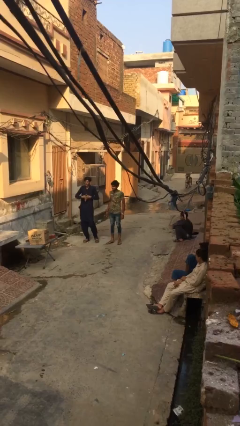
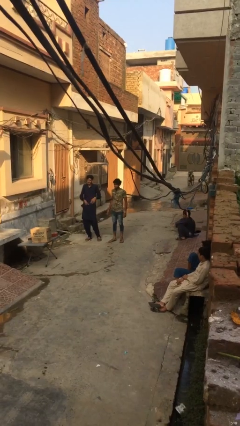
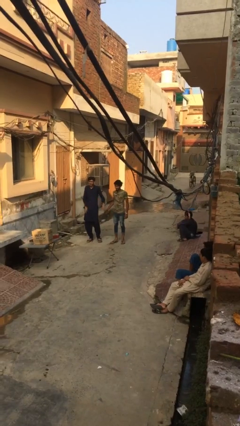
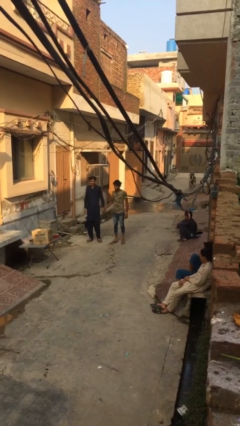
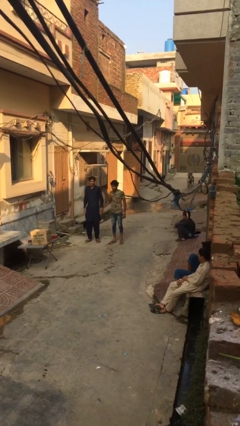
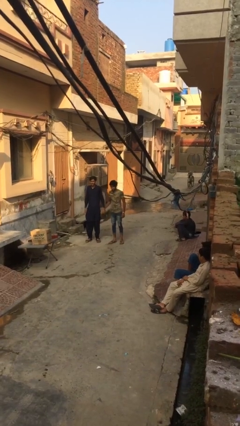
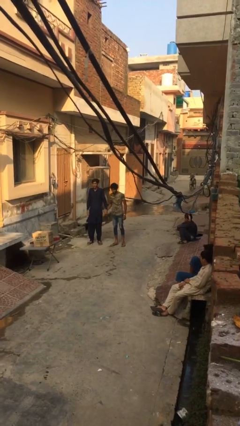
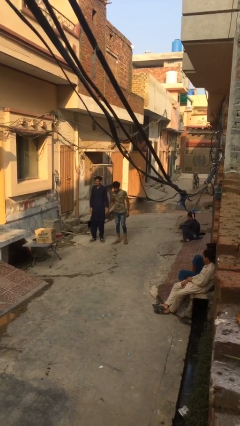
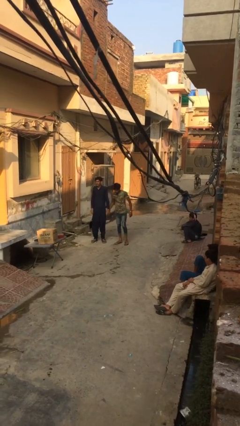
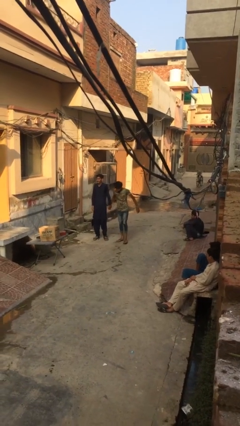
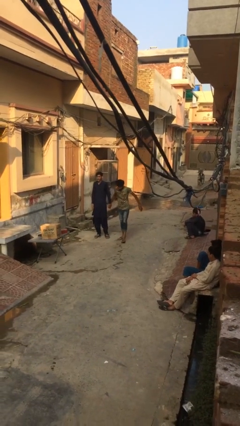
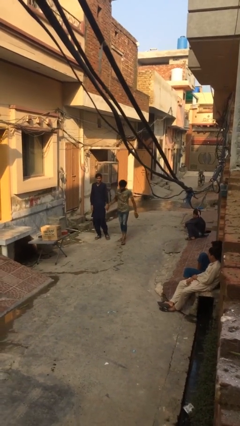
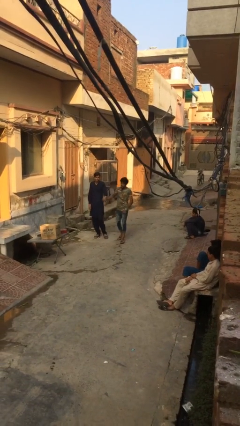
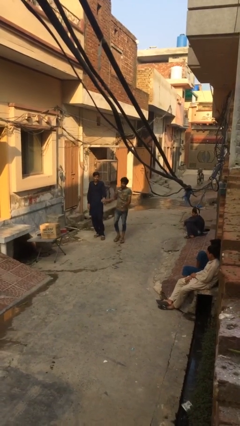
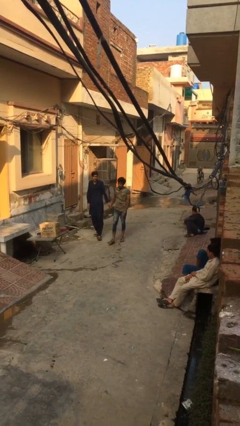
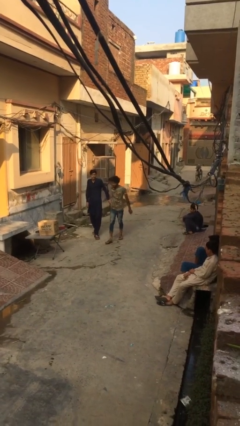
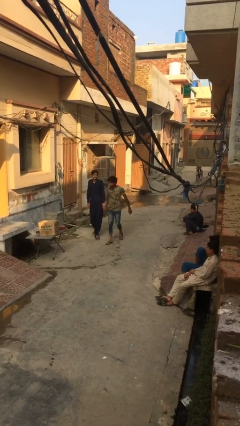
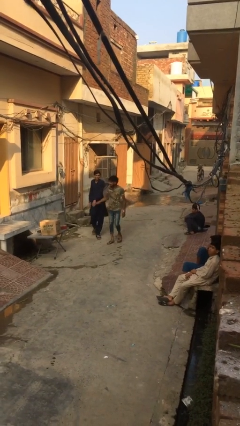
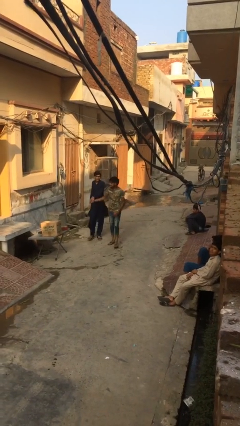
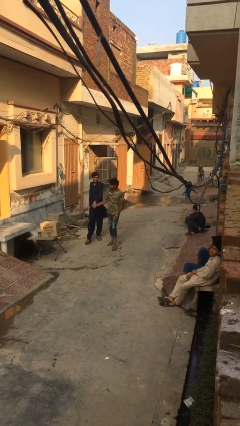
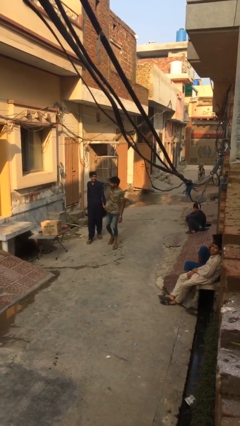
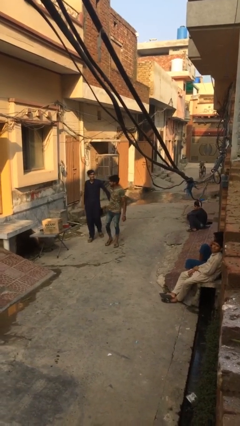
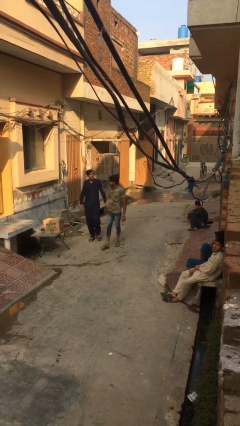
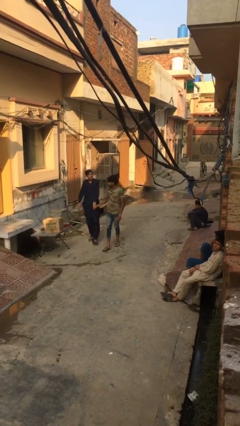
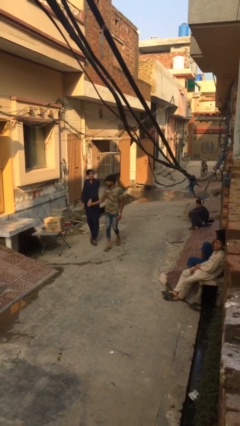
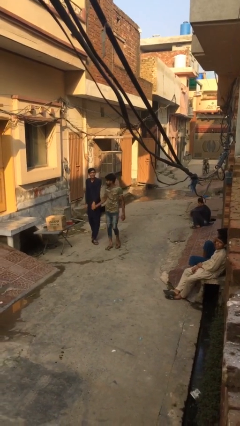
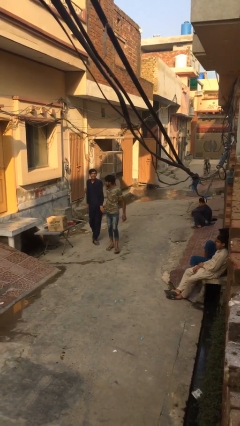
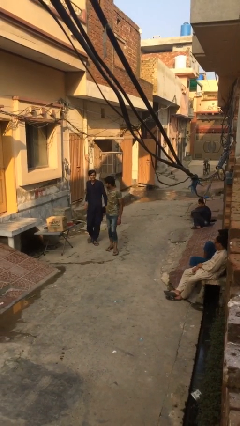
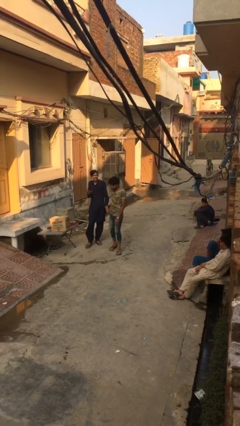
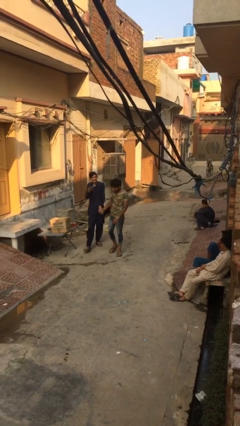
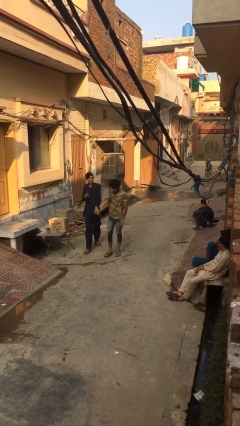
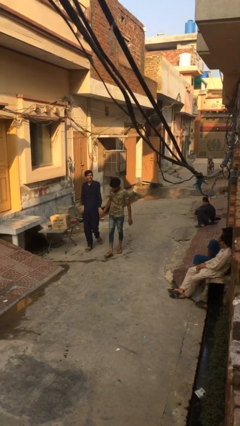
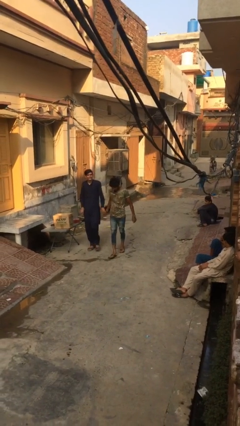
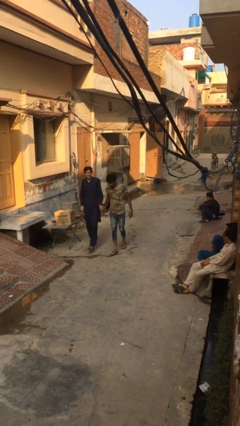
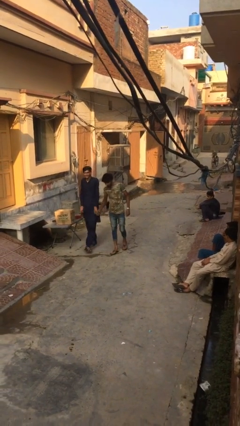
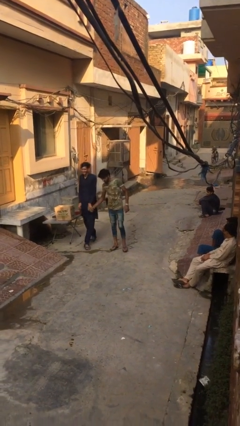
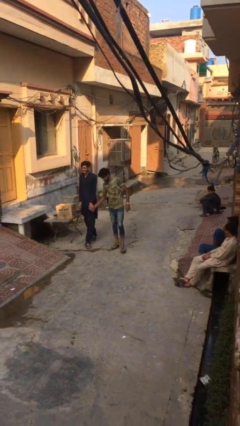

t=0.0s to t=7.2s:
person holds hand

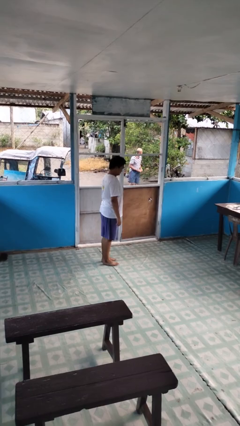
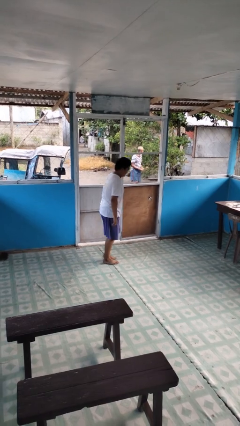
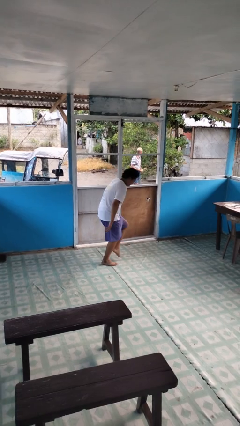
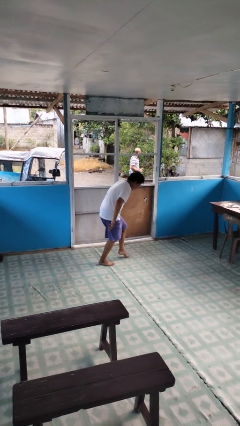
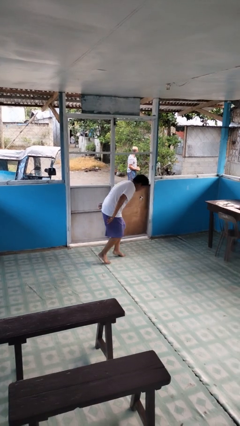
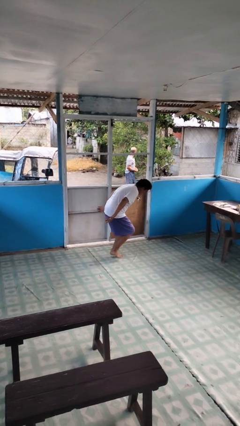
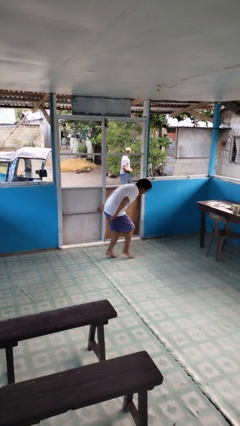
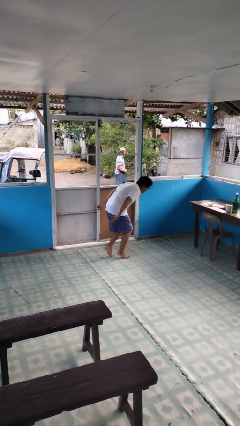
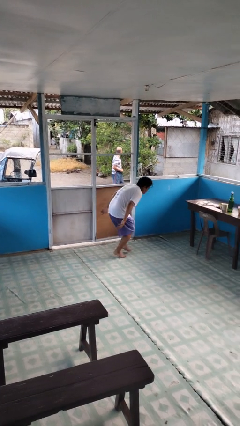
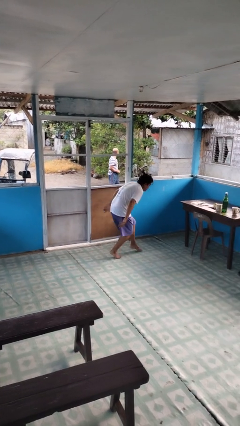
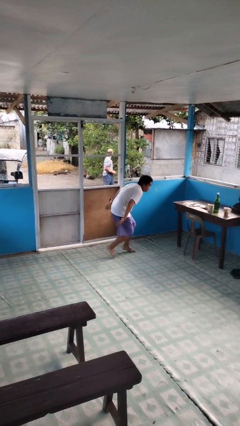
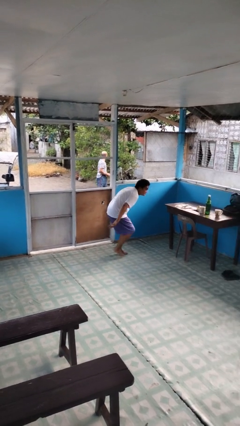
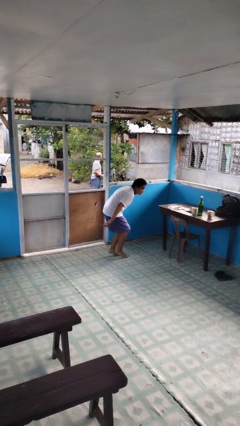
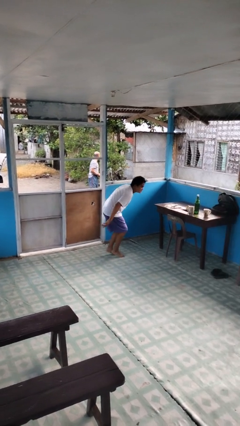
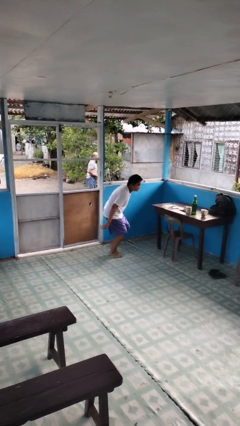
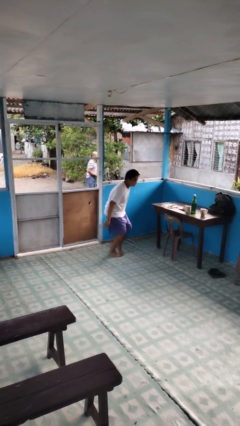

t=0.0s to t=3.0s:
person walks tiptoe

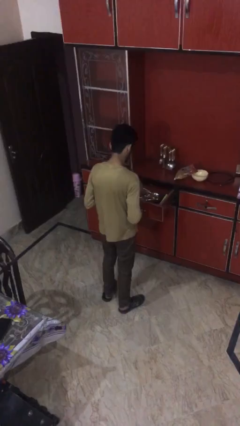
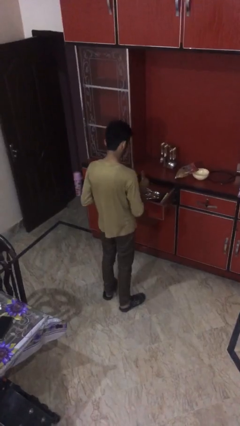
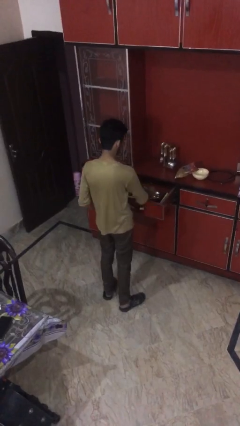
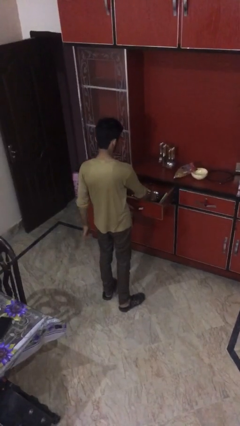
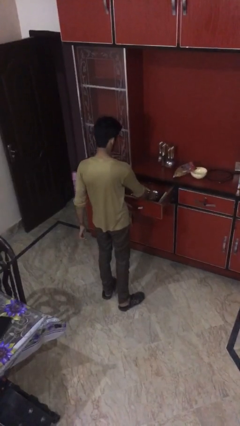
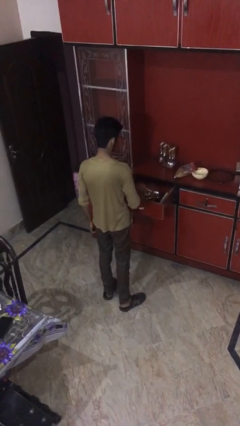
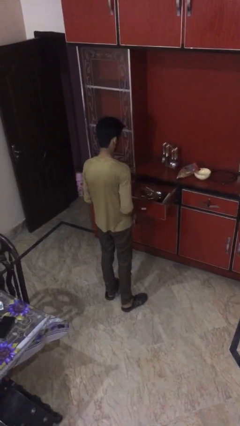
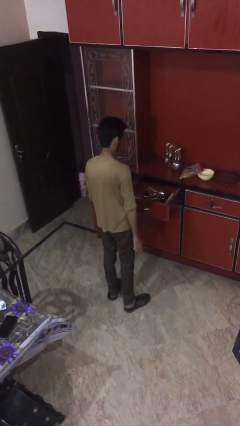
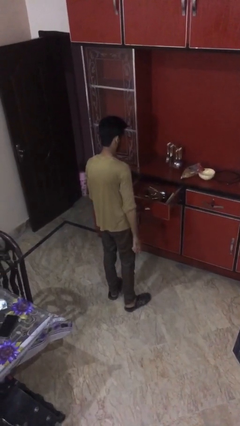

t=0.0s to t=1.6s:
person puts object into kitchen drawer

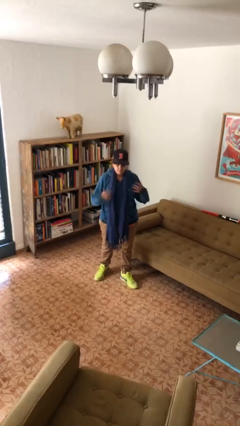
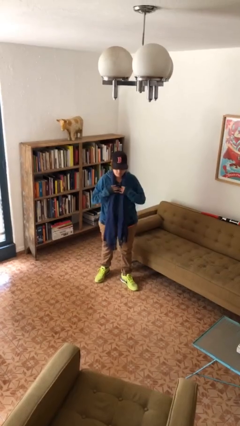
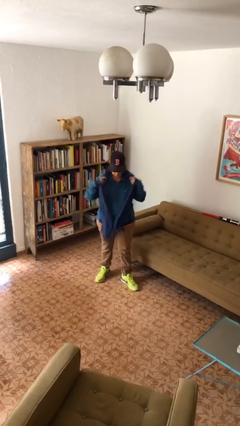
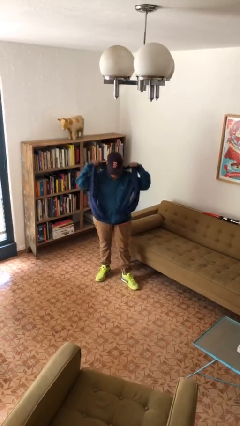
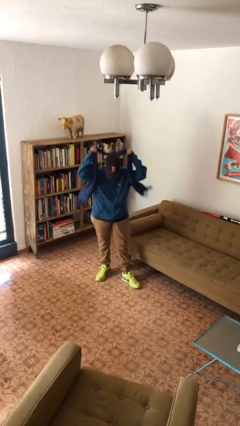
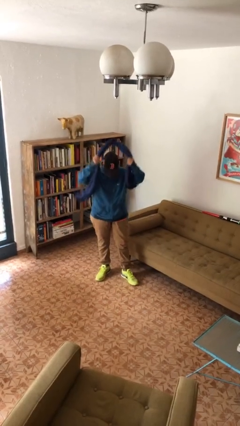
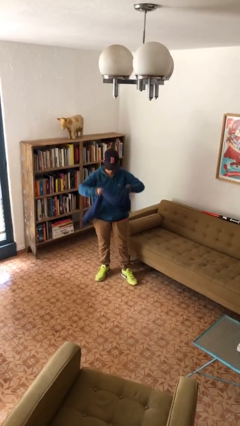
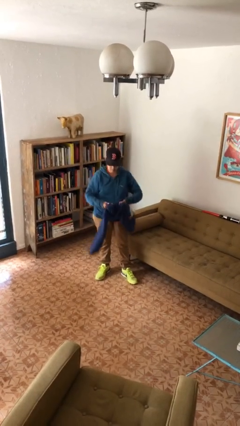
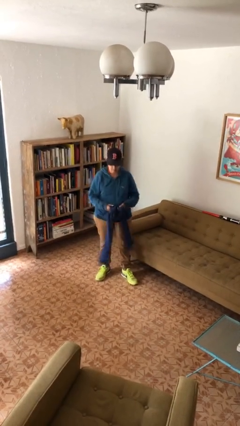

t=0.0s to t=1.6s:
person takes off scarf

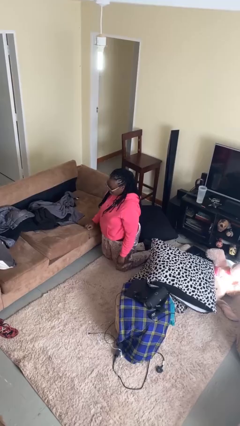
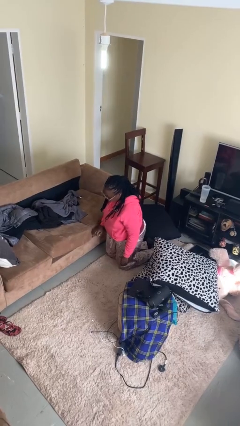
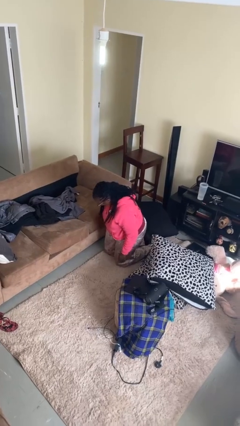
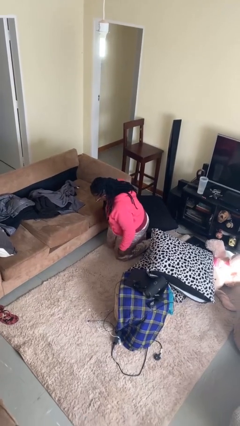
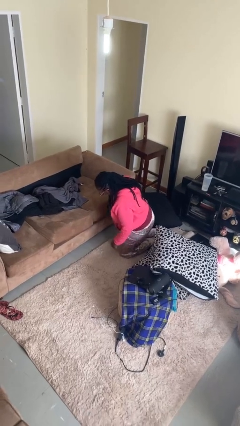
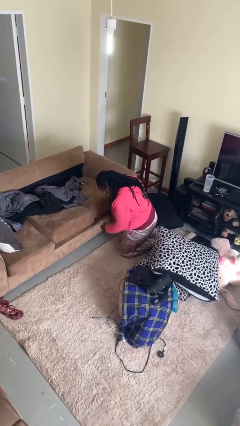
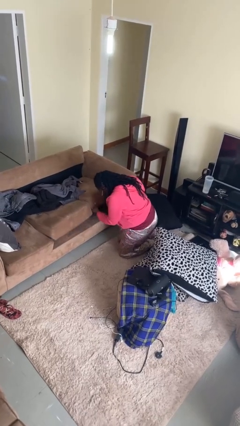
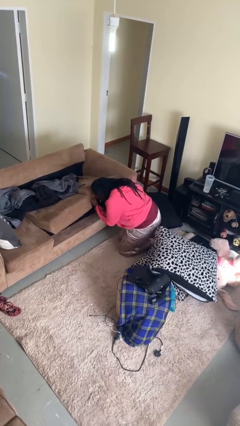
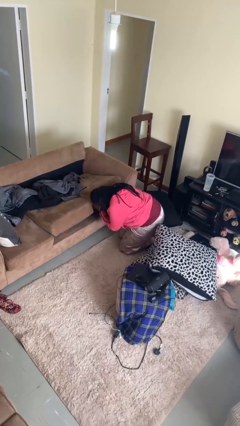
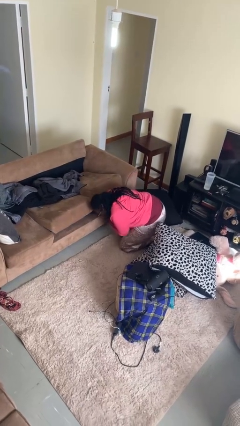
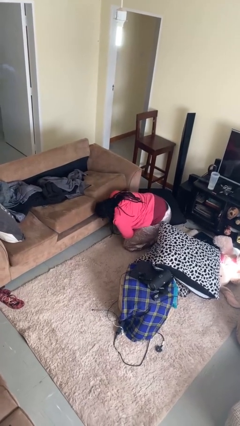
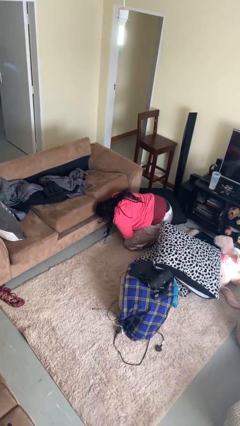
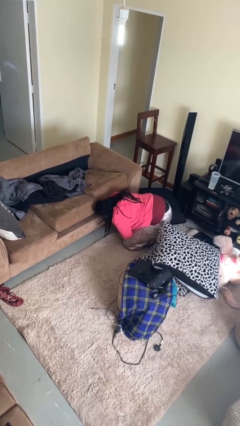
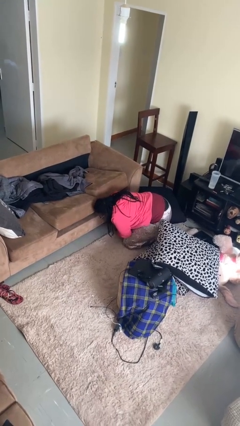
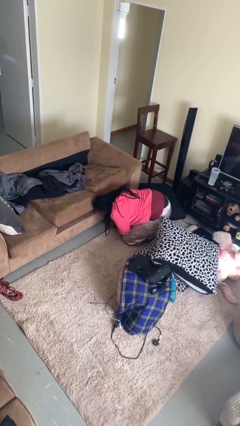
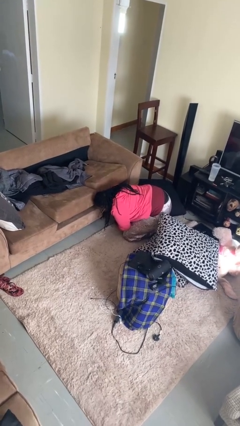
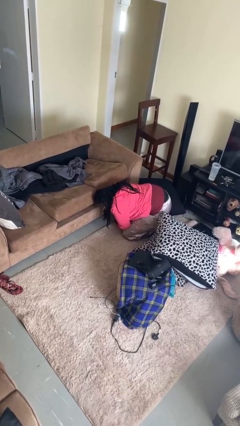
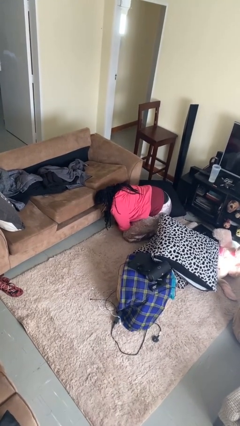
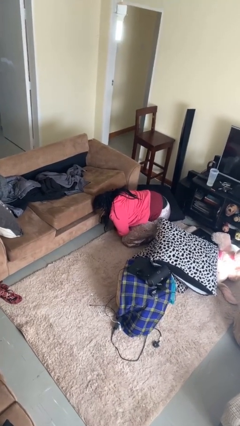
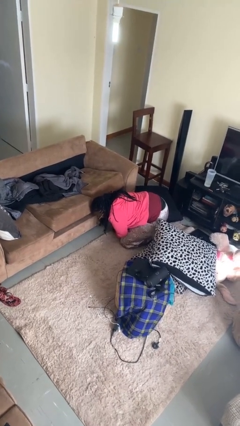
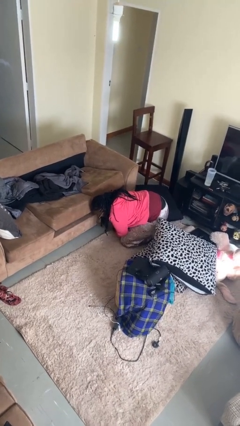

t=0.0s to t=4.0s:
person searches under couch

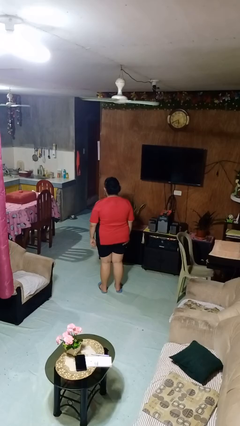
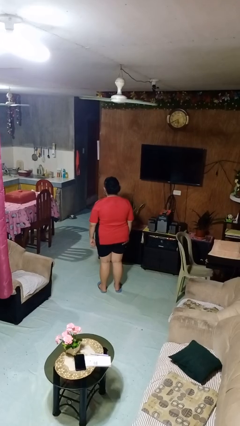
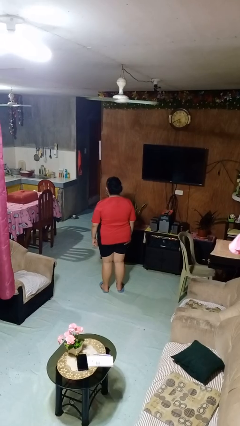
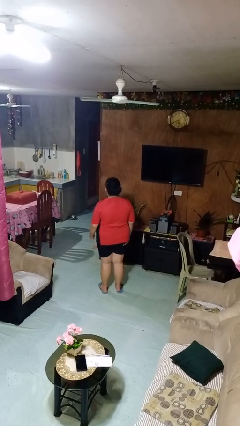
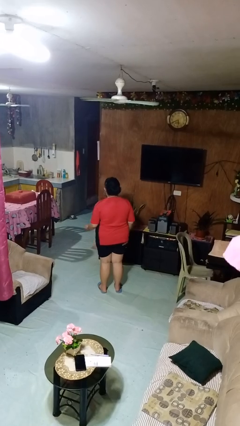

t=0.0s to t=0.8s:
person shrugs
